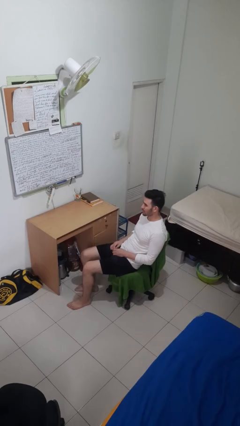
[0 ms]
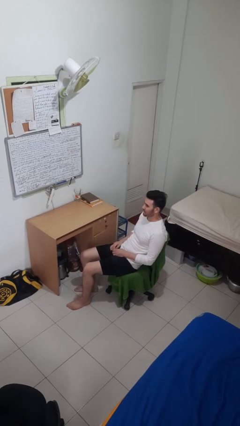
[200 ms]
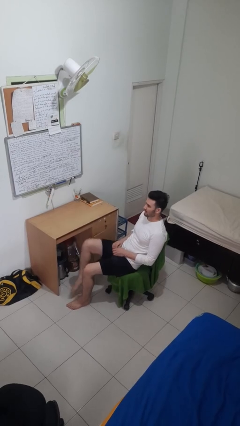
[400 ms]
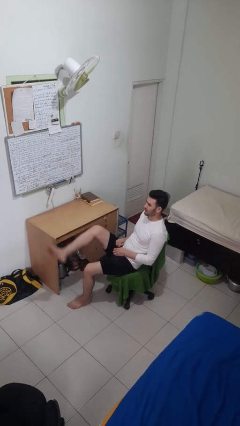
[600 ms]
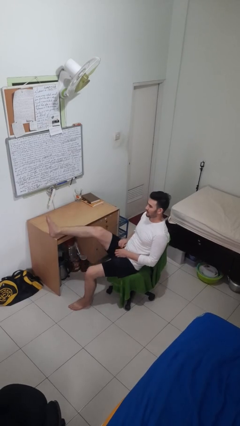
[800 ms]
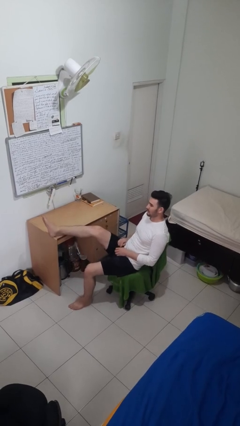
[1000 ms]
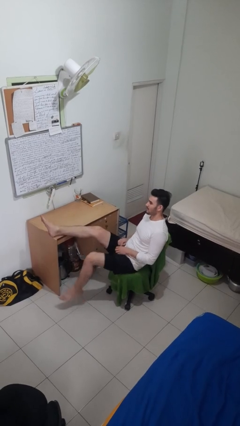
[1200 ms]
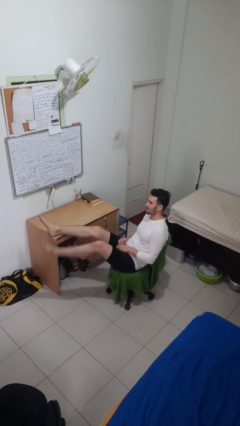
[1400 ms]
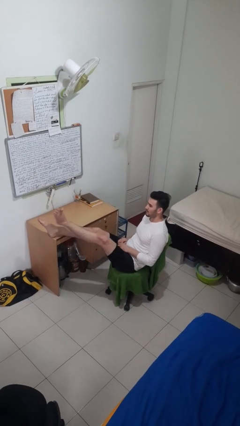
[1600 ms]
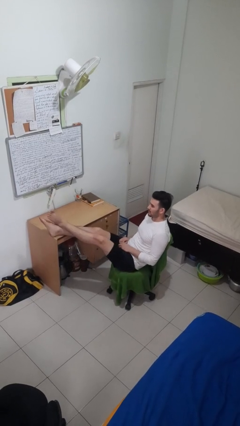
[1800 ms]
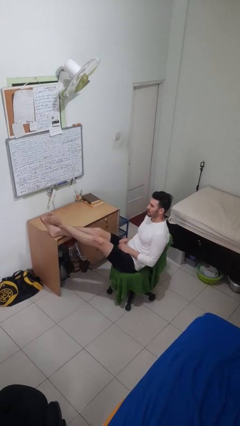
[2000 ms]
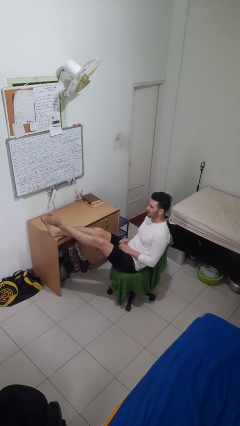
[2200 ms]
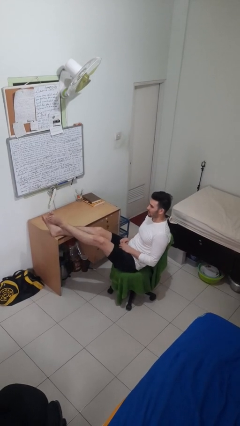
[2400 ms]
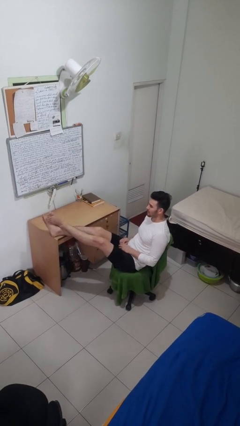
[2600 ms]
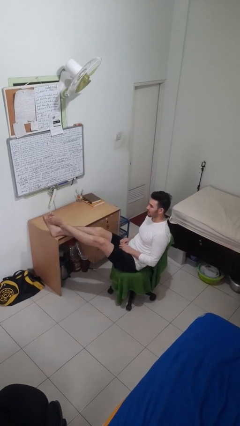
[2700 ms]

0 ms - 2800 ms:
person puts feet up

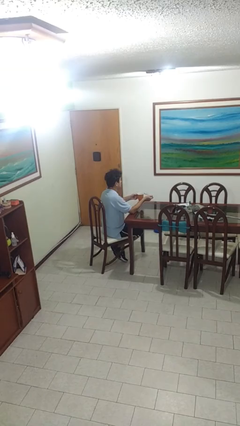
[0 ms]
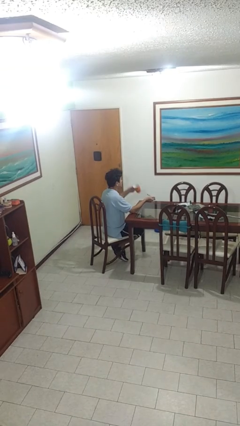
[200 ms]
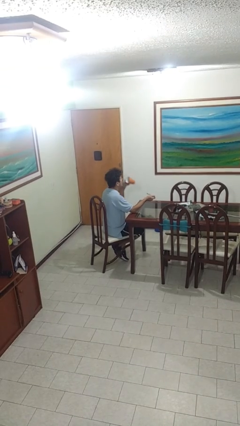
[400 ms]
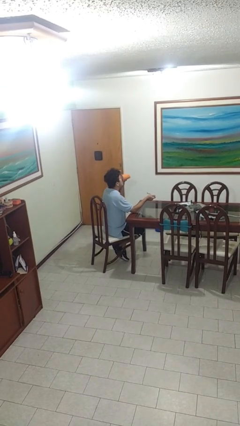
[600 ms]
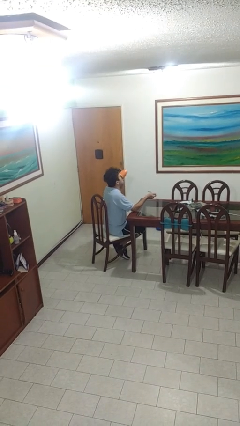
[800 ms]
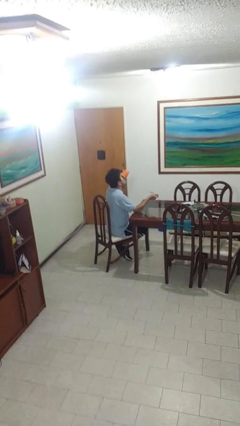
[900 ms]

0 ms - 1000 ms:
person drinks from mug

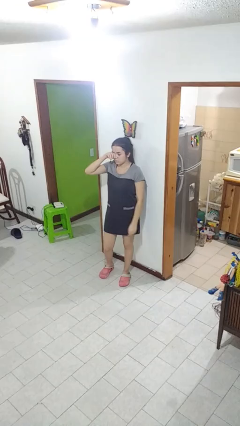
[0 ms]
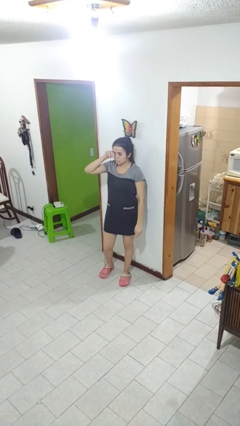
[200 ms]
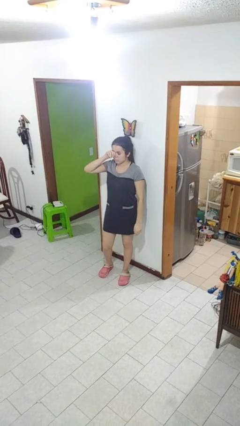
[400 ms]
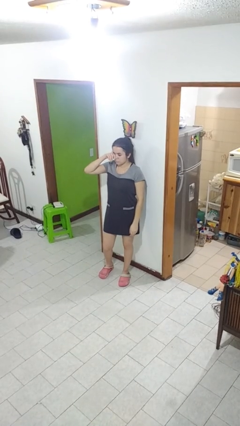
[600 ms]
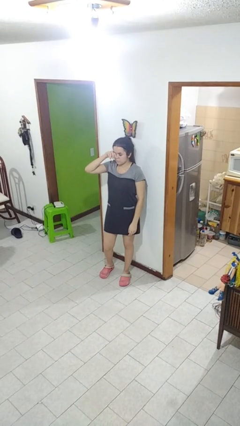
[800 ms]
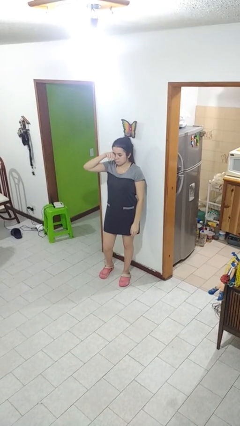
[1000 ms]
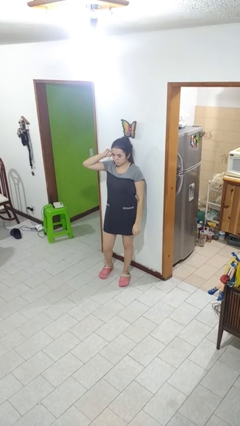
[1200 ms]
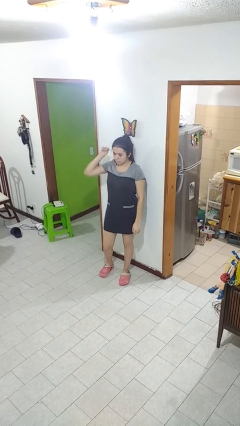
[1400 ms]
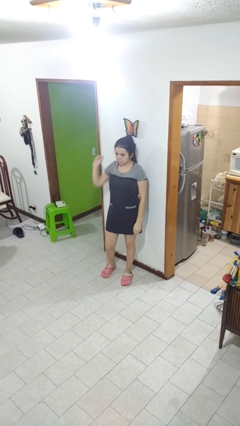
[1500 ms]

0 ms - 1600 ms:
person rubs eyes

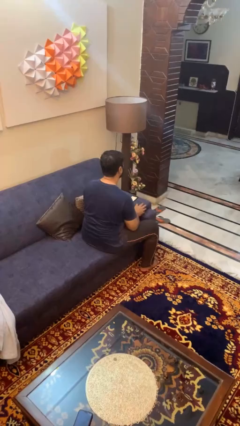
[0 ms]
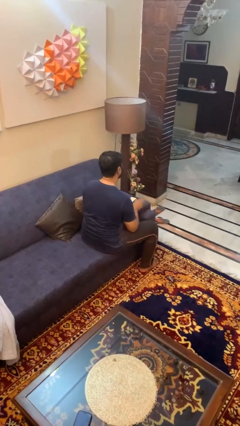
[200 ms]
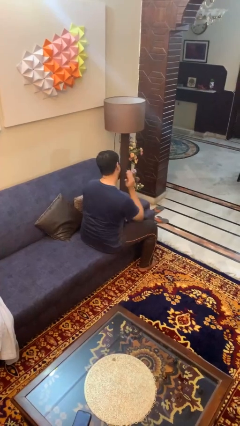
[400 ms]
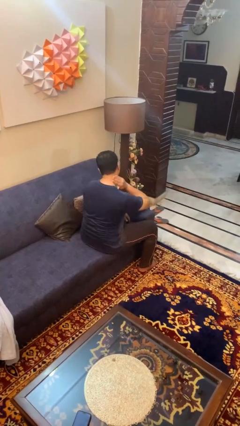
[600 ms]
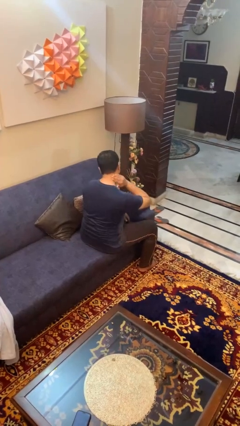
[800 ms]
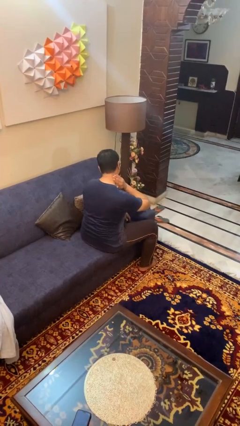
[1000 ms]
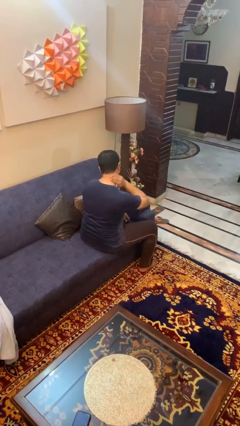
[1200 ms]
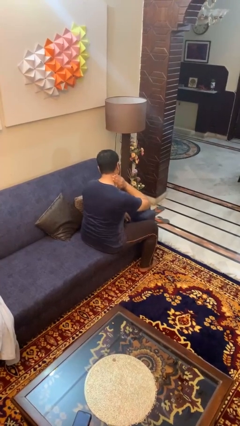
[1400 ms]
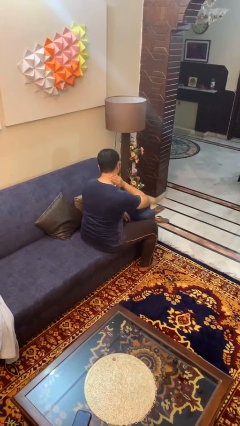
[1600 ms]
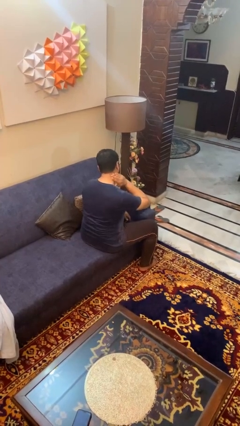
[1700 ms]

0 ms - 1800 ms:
person rubs neck

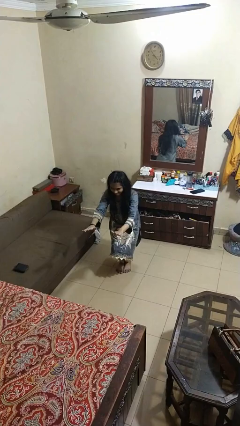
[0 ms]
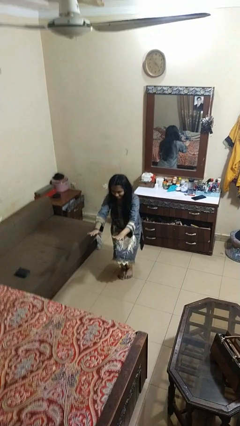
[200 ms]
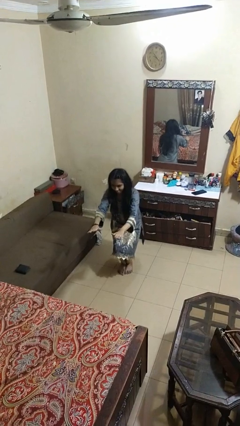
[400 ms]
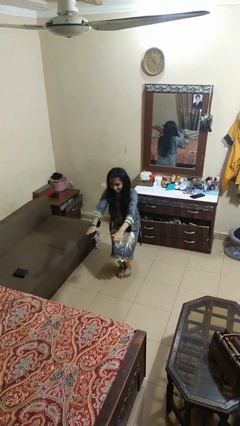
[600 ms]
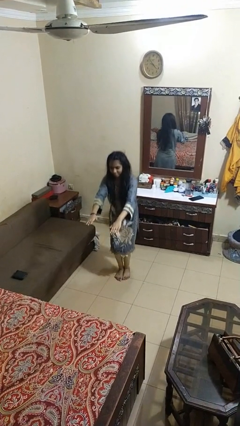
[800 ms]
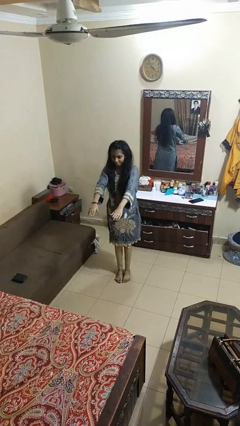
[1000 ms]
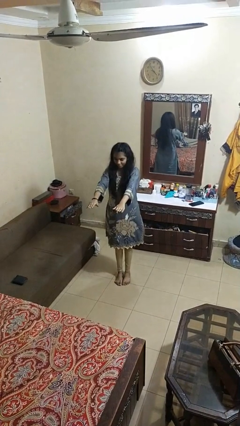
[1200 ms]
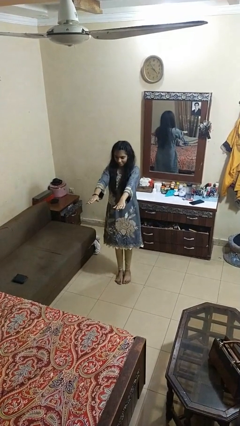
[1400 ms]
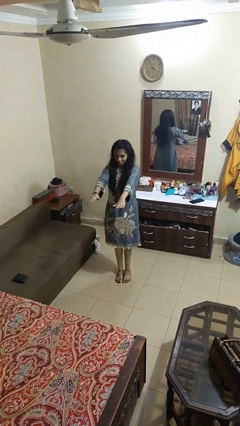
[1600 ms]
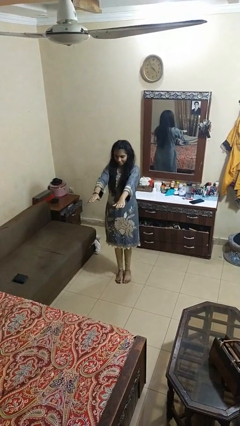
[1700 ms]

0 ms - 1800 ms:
person stands up

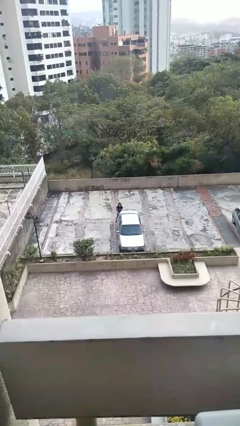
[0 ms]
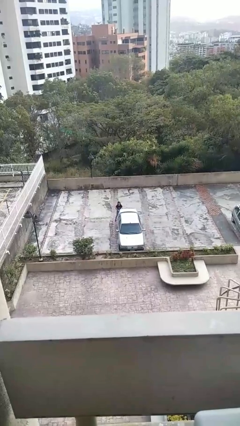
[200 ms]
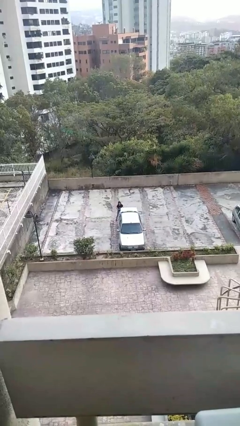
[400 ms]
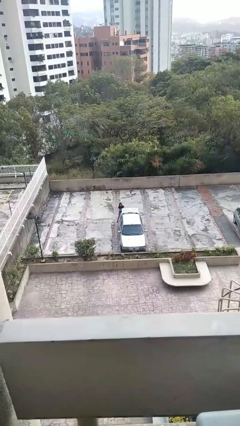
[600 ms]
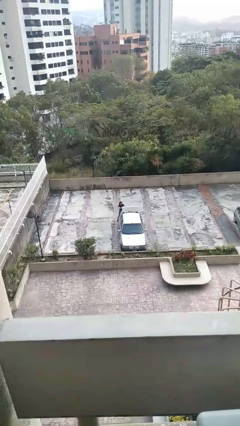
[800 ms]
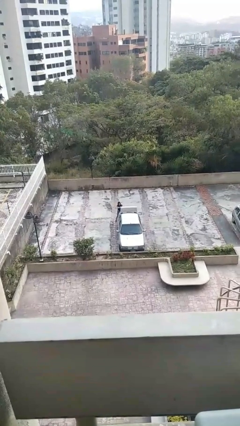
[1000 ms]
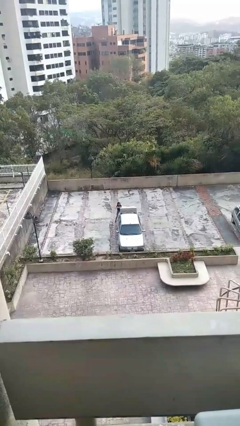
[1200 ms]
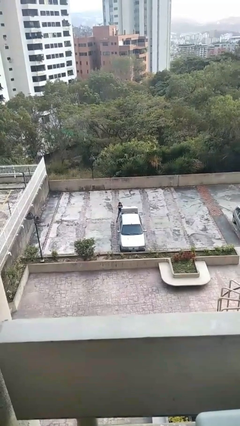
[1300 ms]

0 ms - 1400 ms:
person opens car trunk

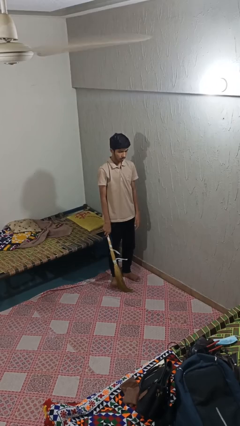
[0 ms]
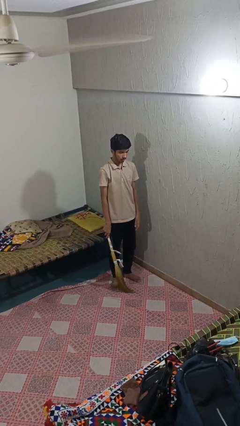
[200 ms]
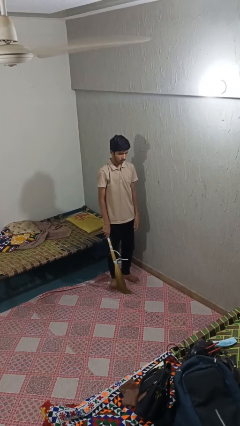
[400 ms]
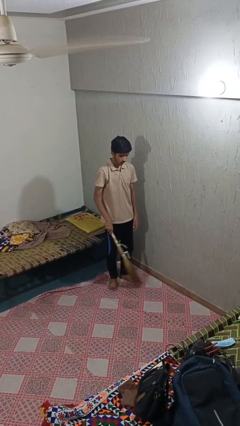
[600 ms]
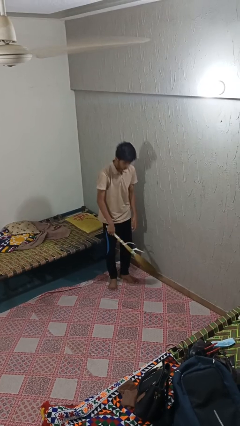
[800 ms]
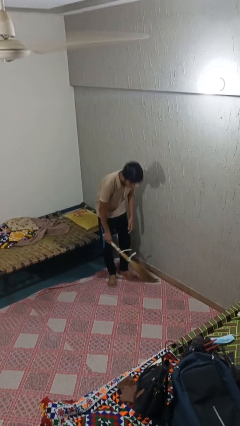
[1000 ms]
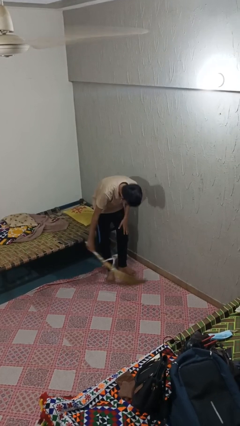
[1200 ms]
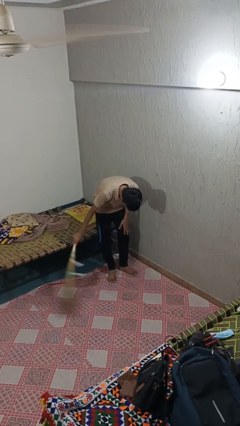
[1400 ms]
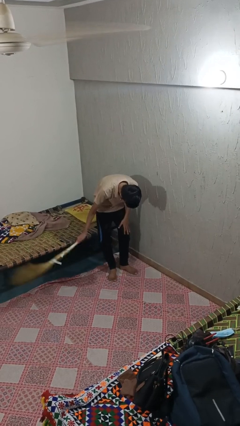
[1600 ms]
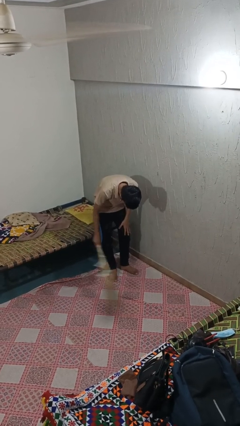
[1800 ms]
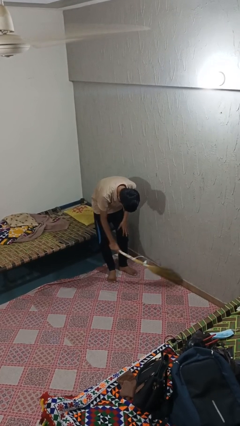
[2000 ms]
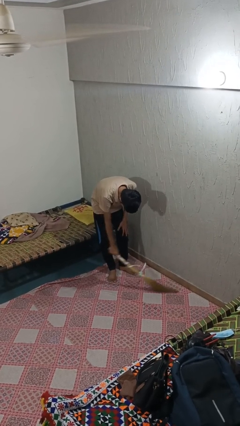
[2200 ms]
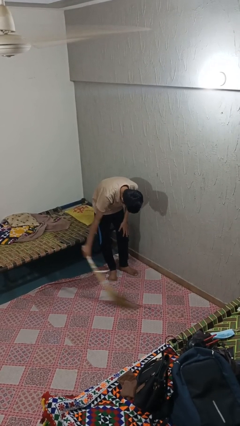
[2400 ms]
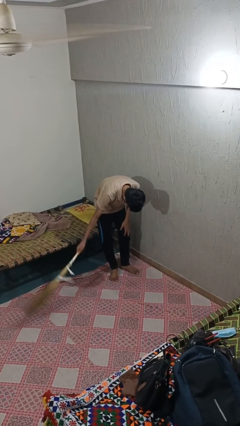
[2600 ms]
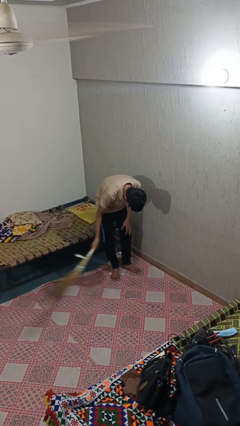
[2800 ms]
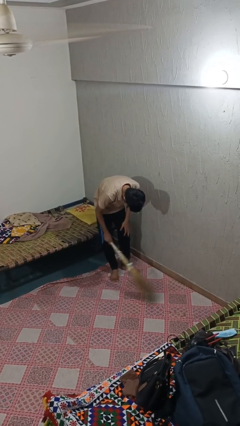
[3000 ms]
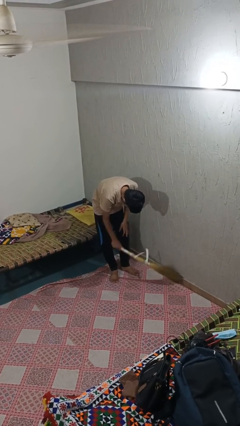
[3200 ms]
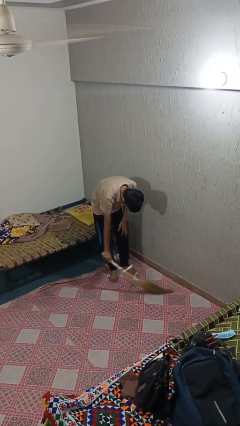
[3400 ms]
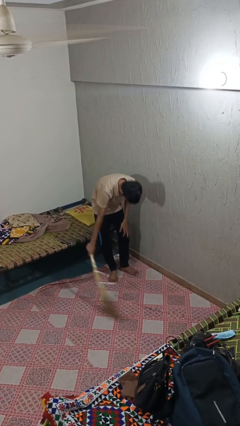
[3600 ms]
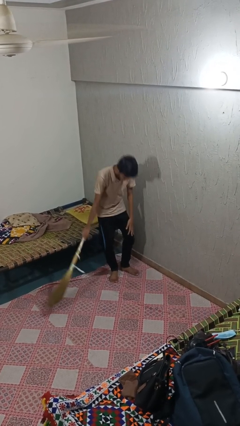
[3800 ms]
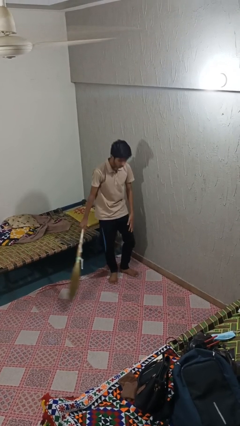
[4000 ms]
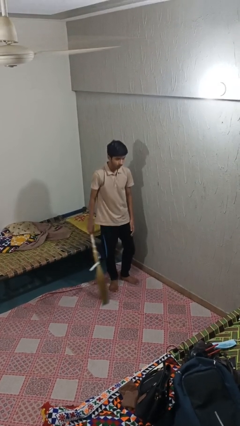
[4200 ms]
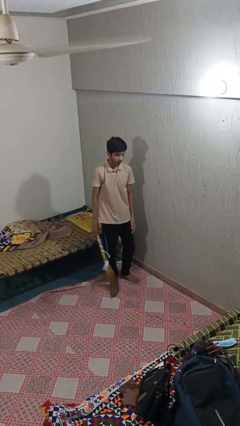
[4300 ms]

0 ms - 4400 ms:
person sweeps floor

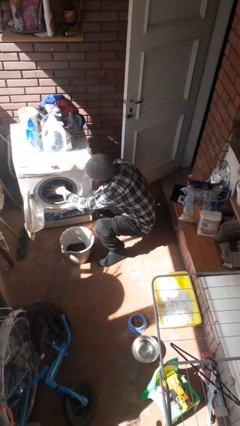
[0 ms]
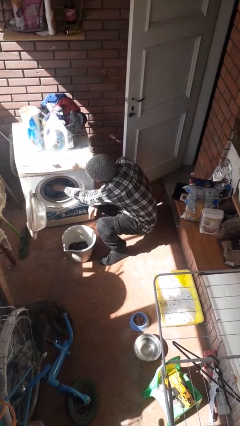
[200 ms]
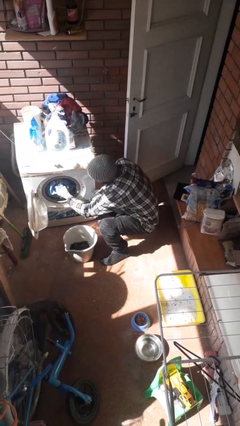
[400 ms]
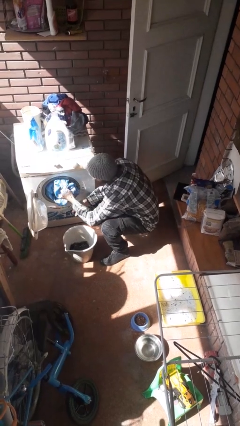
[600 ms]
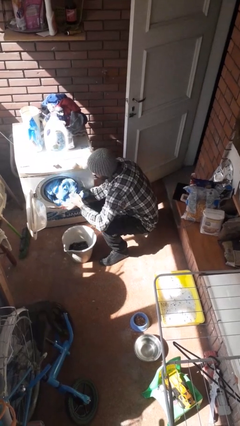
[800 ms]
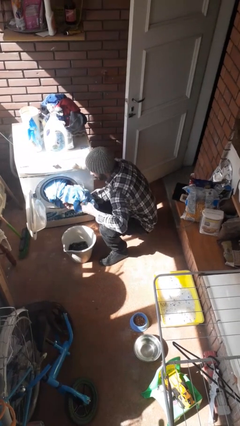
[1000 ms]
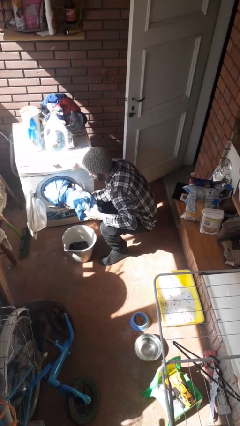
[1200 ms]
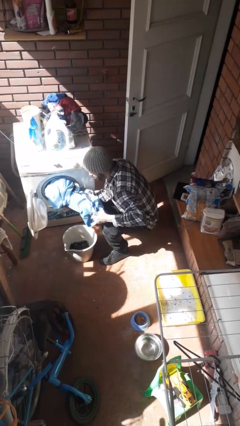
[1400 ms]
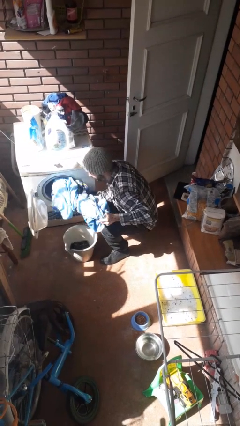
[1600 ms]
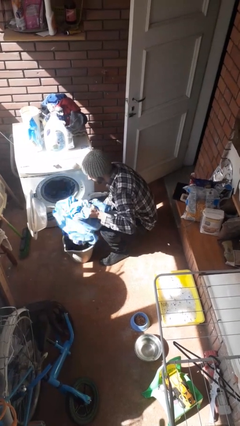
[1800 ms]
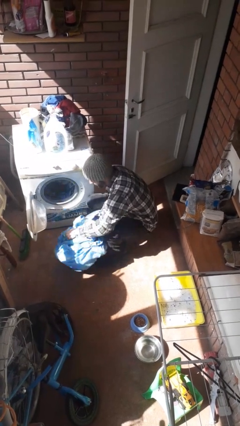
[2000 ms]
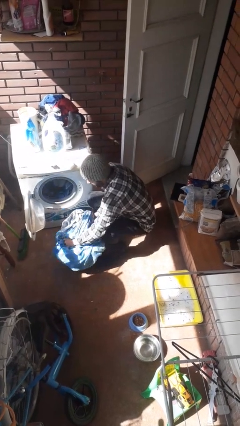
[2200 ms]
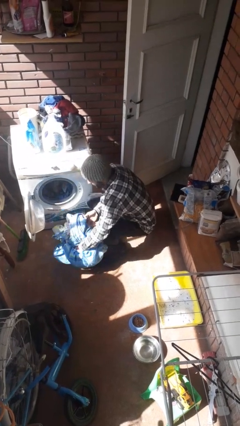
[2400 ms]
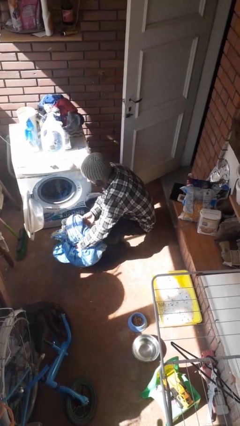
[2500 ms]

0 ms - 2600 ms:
person unloads clotheswasher
